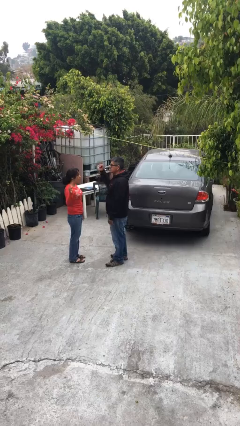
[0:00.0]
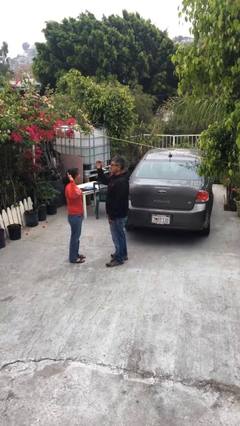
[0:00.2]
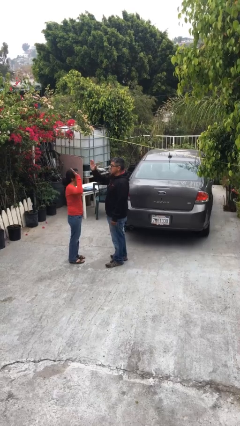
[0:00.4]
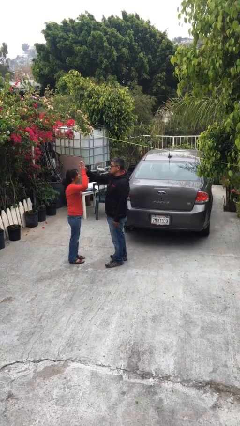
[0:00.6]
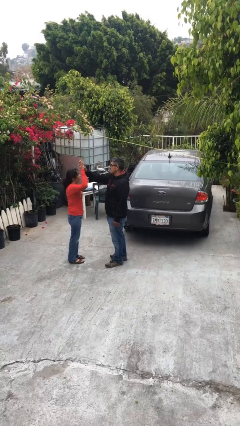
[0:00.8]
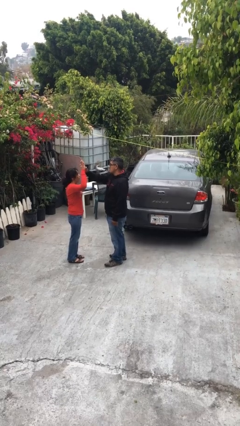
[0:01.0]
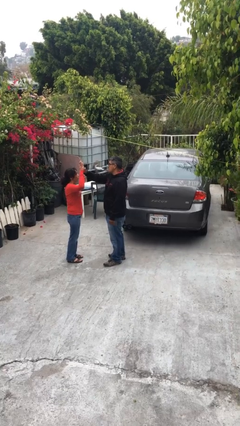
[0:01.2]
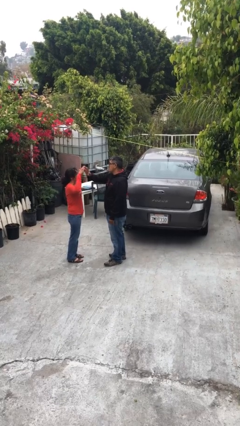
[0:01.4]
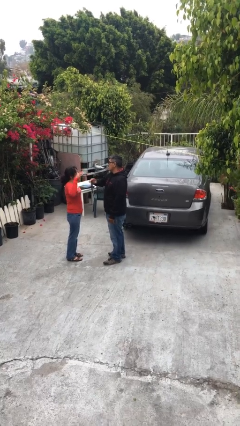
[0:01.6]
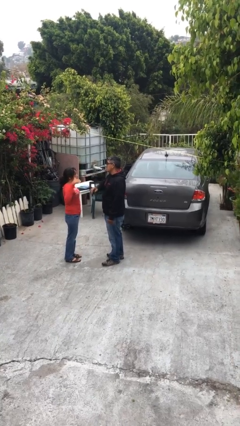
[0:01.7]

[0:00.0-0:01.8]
person highfives hand

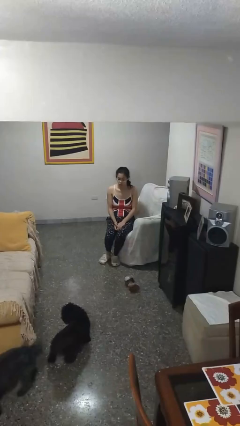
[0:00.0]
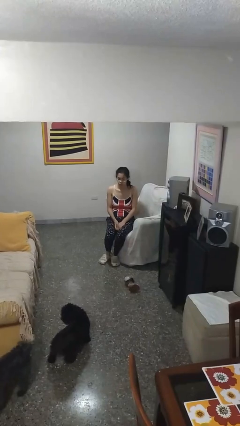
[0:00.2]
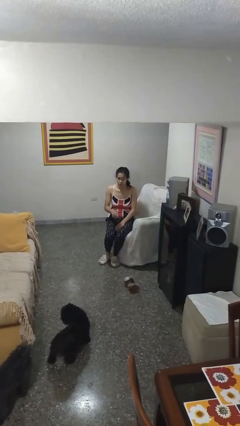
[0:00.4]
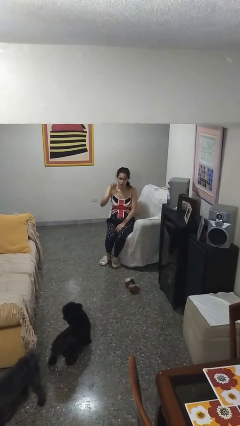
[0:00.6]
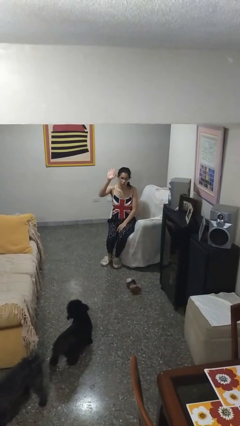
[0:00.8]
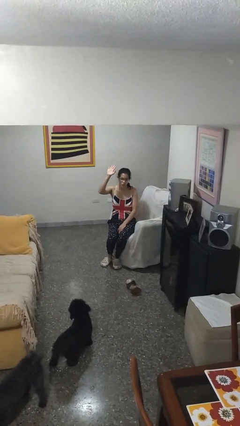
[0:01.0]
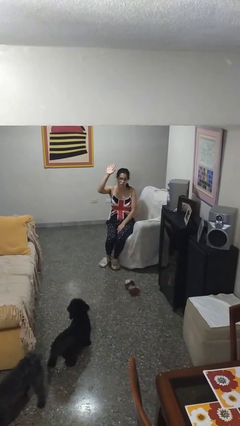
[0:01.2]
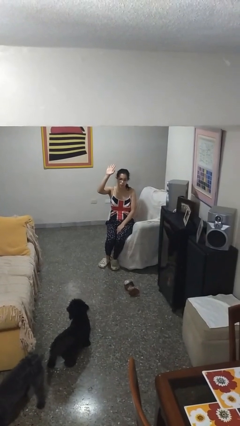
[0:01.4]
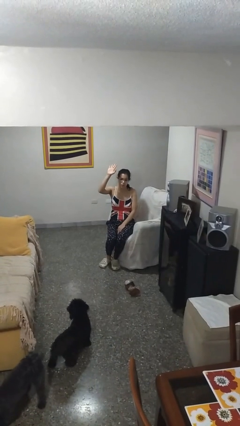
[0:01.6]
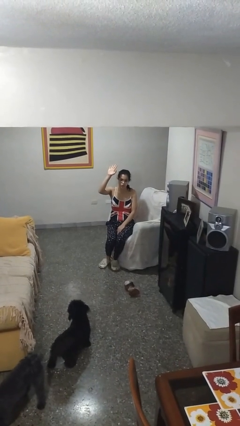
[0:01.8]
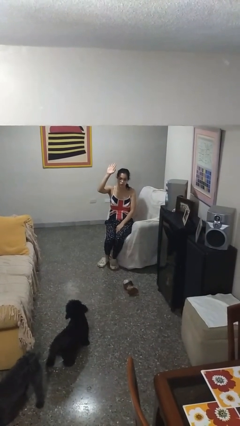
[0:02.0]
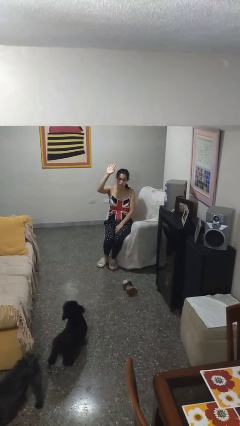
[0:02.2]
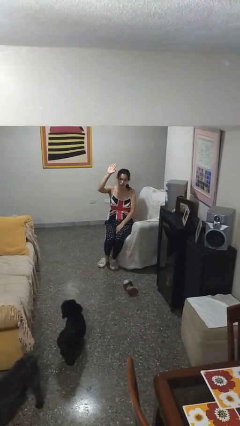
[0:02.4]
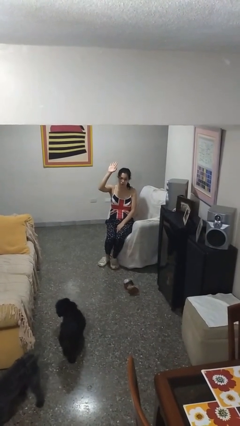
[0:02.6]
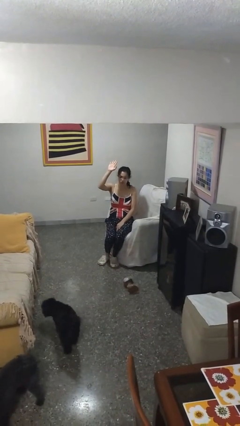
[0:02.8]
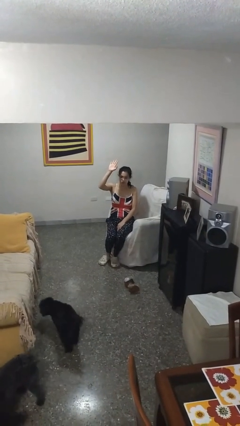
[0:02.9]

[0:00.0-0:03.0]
person gestures raise hand

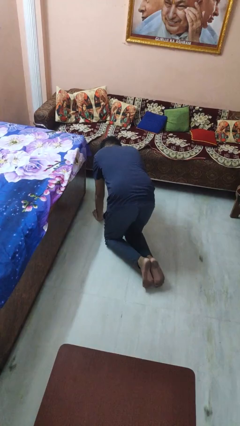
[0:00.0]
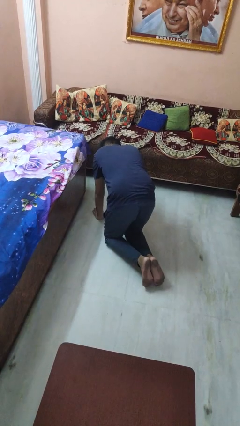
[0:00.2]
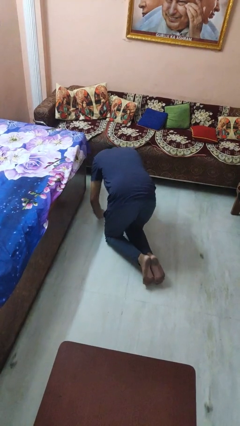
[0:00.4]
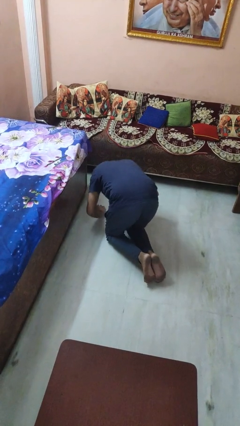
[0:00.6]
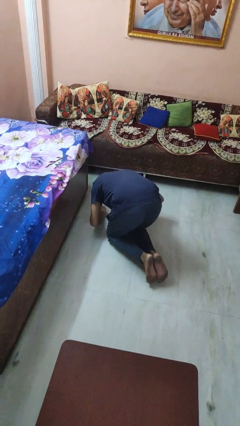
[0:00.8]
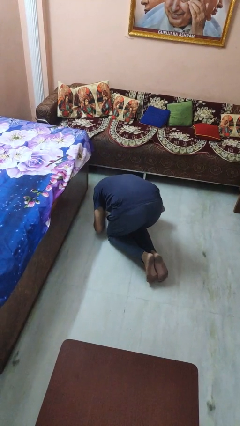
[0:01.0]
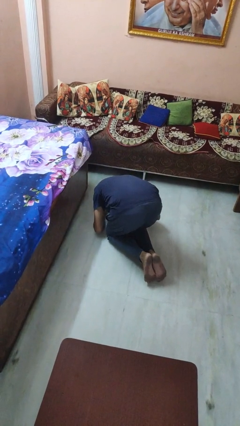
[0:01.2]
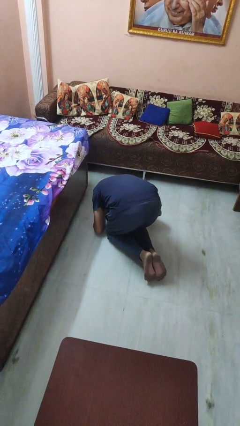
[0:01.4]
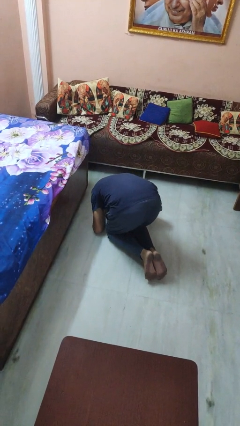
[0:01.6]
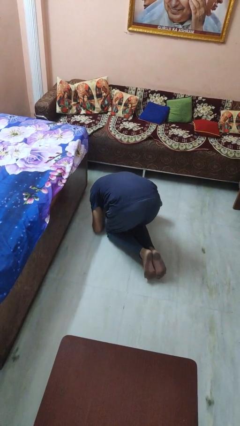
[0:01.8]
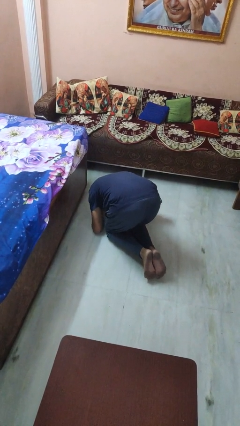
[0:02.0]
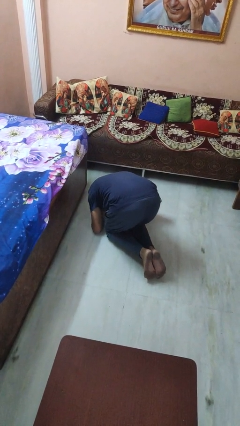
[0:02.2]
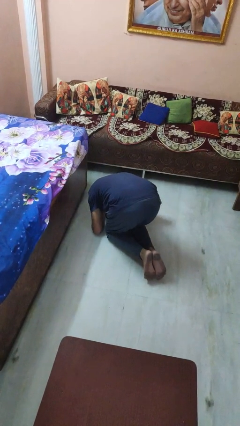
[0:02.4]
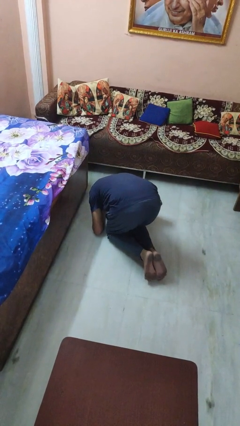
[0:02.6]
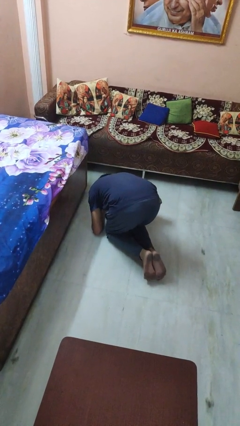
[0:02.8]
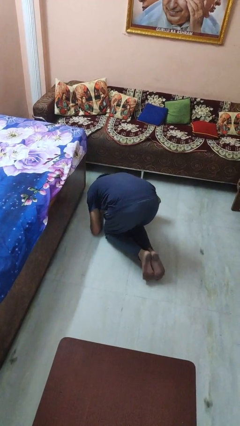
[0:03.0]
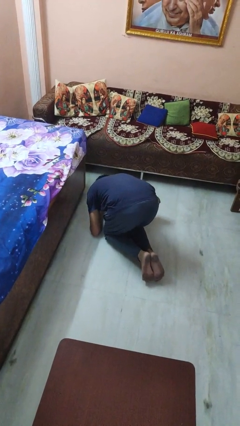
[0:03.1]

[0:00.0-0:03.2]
person searches under bed

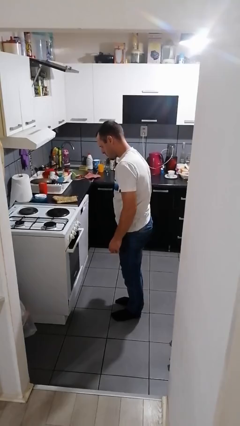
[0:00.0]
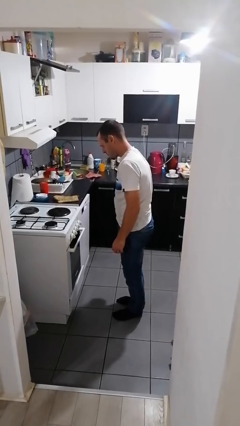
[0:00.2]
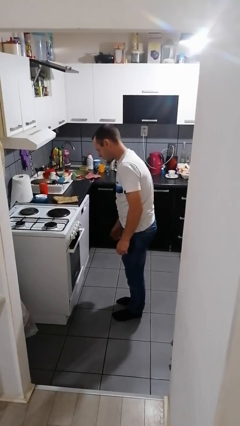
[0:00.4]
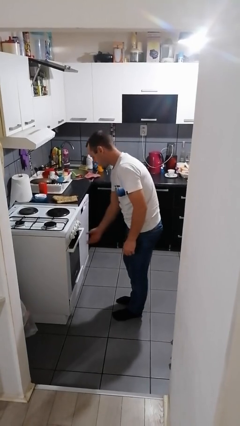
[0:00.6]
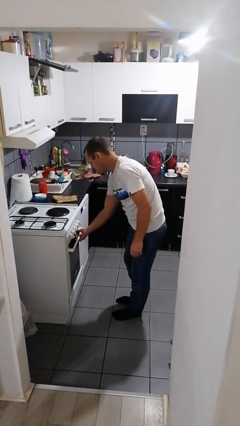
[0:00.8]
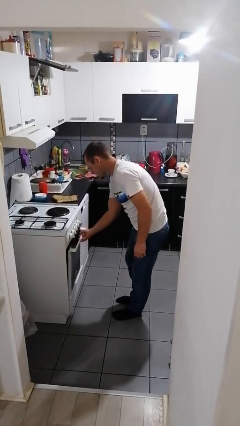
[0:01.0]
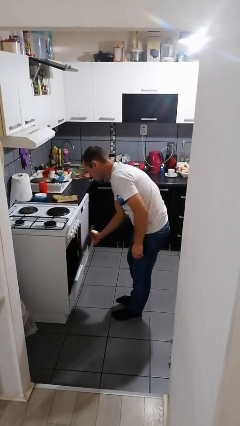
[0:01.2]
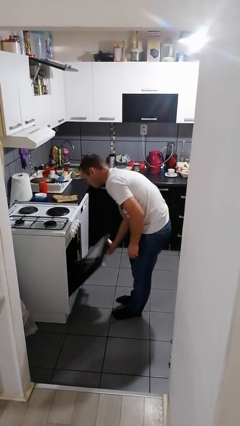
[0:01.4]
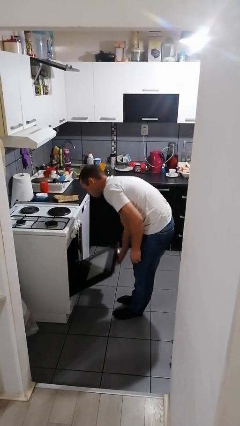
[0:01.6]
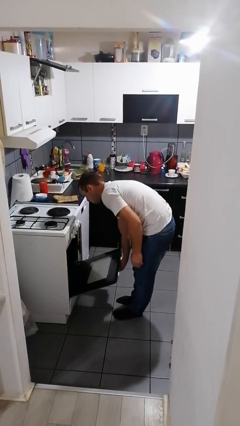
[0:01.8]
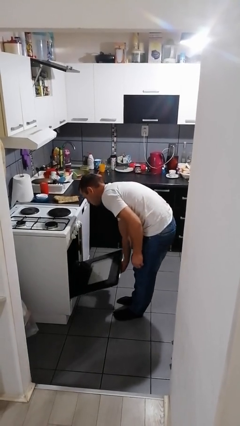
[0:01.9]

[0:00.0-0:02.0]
person opens oven door

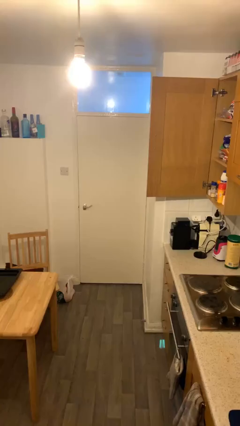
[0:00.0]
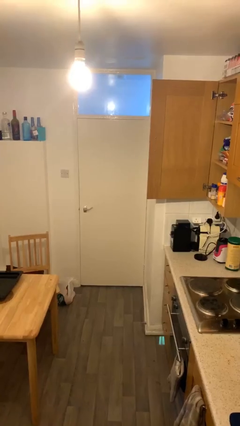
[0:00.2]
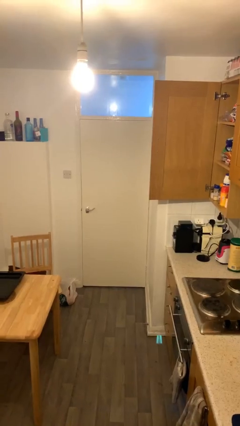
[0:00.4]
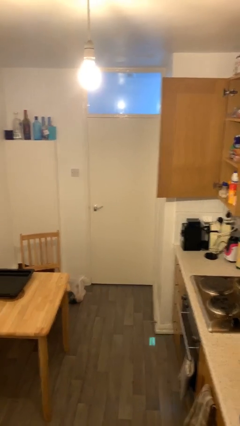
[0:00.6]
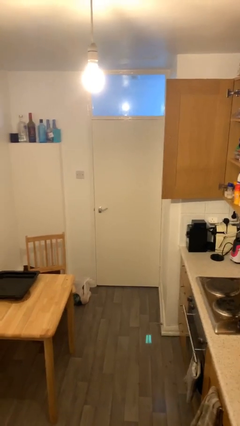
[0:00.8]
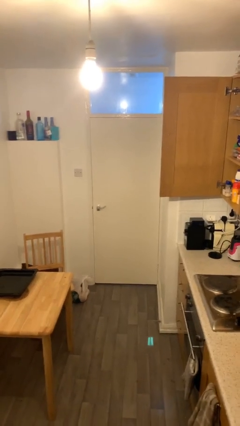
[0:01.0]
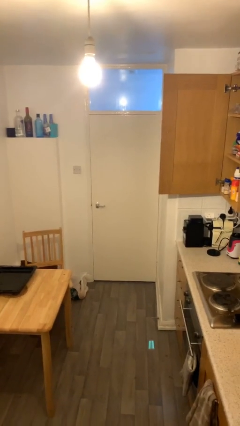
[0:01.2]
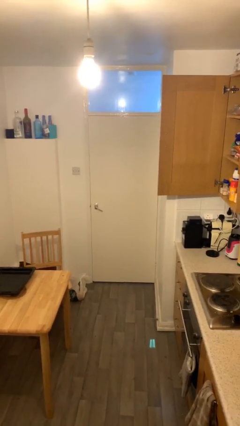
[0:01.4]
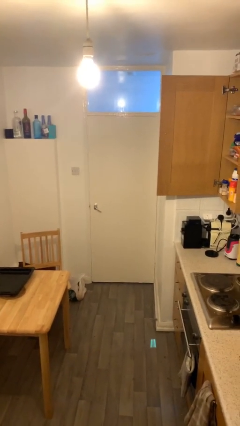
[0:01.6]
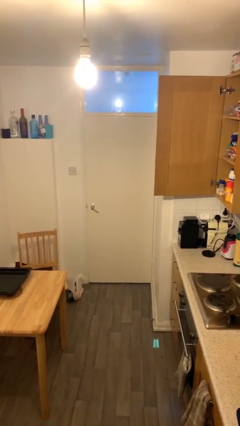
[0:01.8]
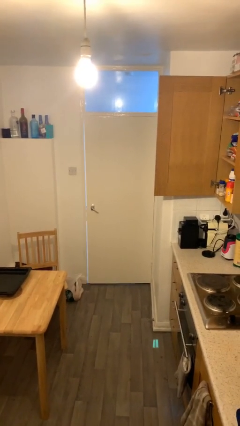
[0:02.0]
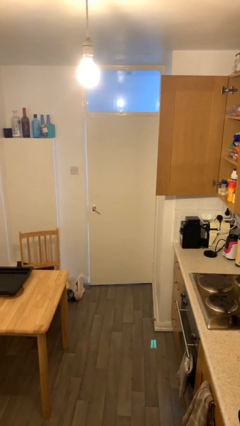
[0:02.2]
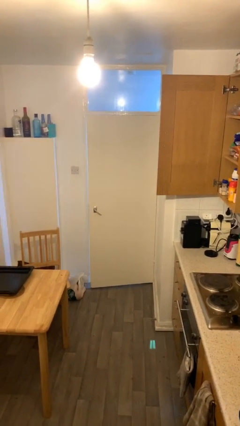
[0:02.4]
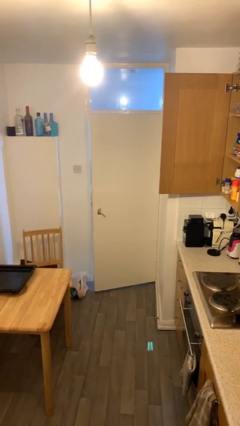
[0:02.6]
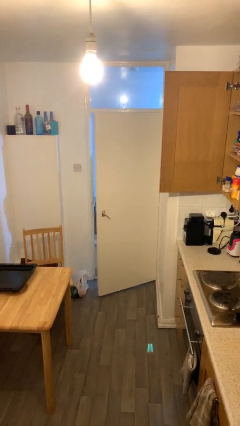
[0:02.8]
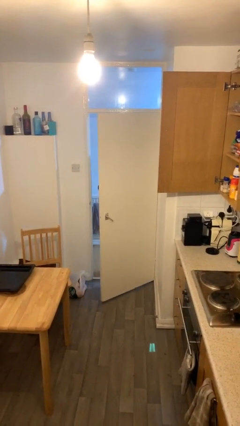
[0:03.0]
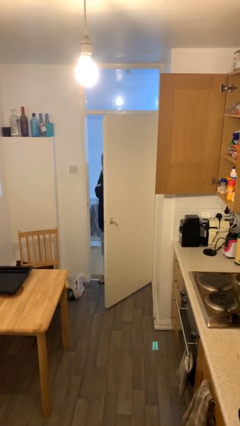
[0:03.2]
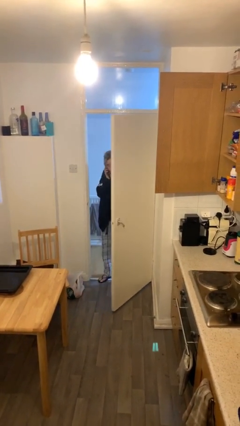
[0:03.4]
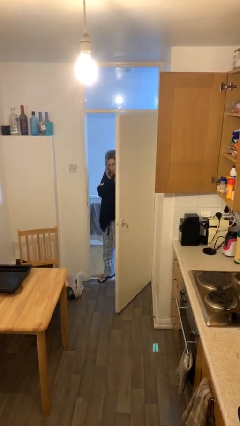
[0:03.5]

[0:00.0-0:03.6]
person opens facility door

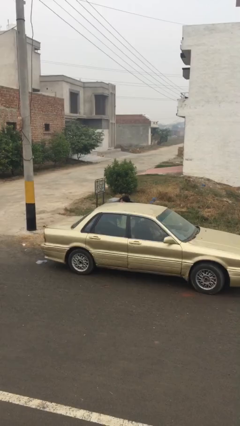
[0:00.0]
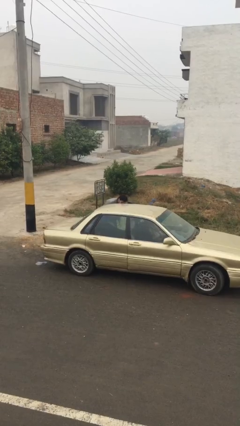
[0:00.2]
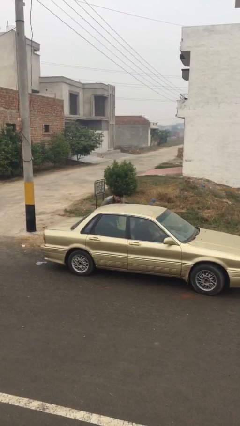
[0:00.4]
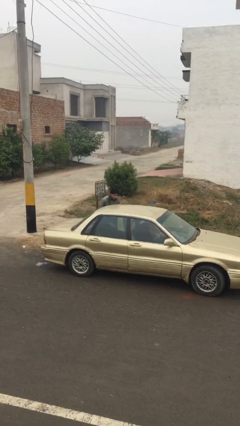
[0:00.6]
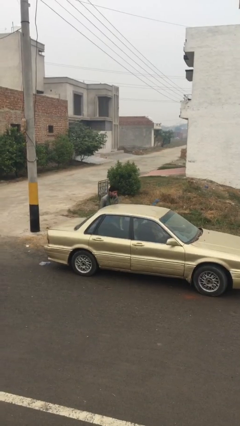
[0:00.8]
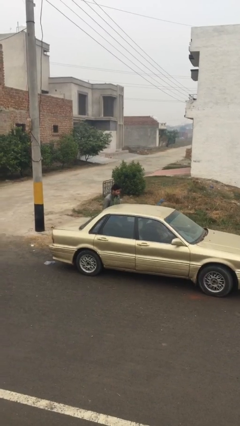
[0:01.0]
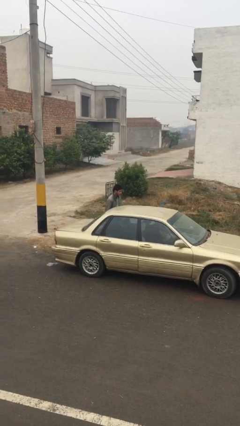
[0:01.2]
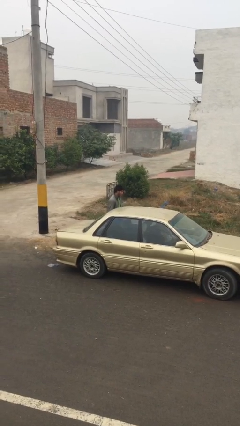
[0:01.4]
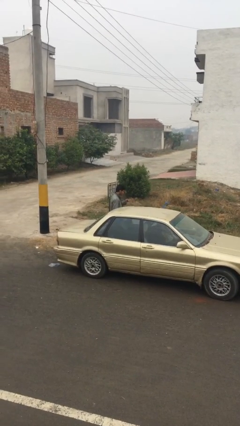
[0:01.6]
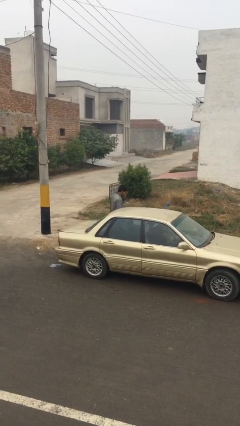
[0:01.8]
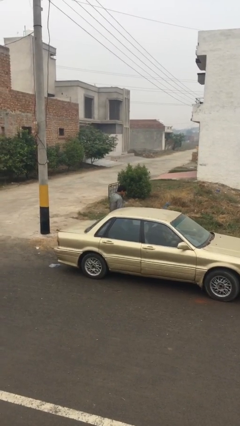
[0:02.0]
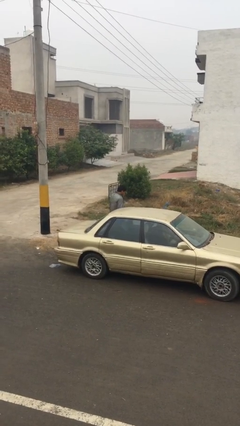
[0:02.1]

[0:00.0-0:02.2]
person closes car door

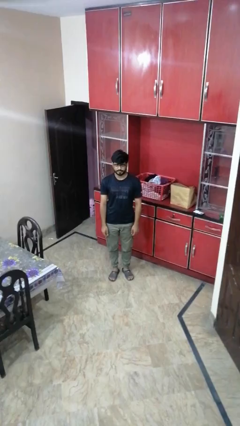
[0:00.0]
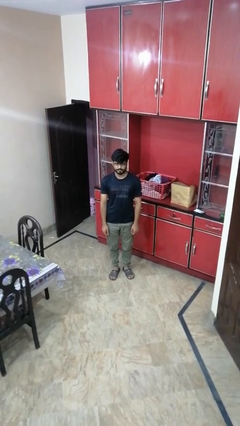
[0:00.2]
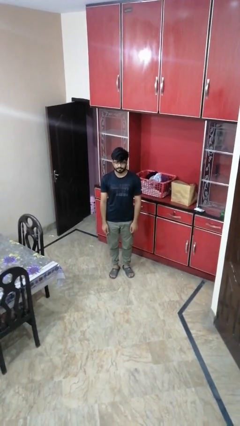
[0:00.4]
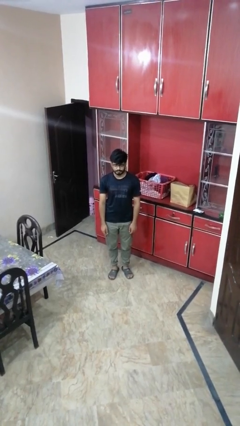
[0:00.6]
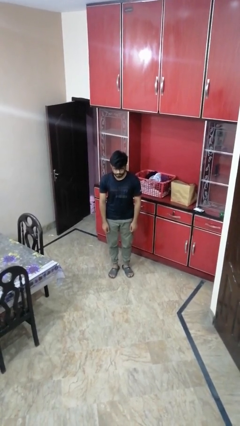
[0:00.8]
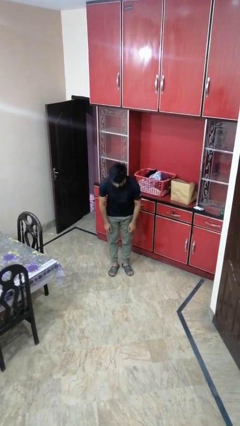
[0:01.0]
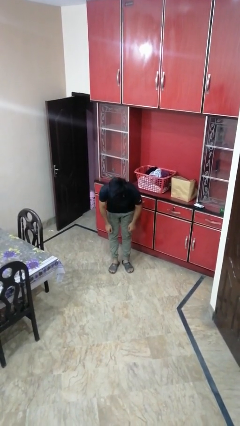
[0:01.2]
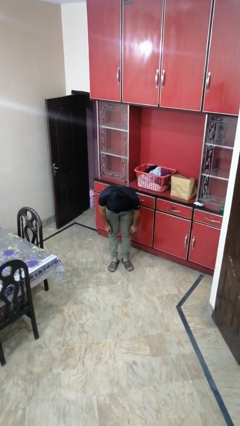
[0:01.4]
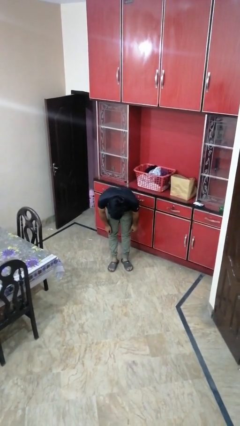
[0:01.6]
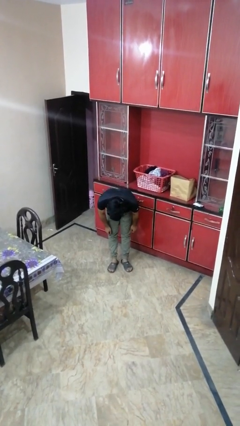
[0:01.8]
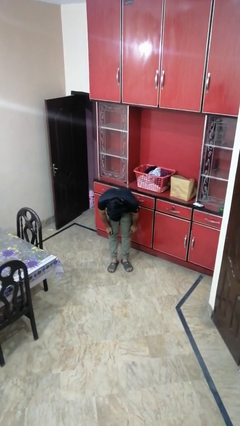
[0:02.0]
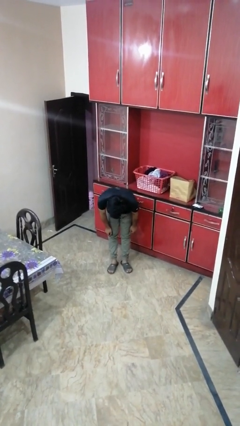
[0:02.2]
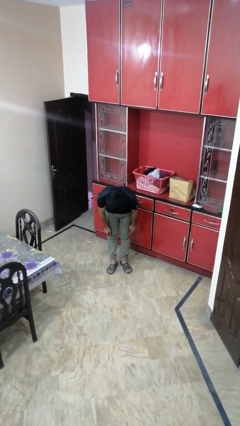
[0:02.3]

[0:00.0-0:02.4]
person bows
